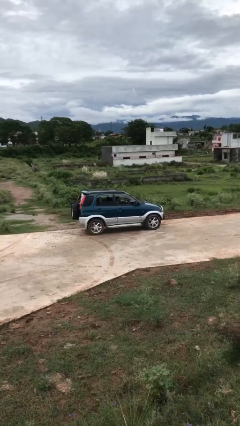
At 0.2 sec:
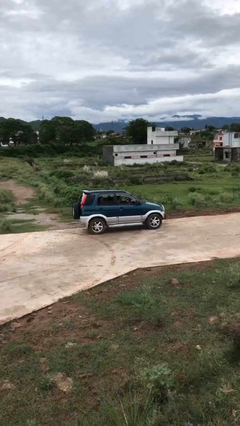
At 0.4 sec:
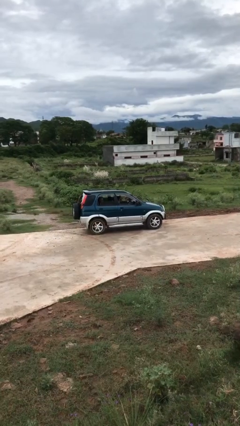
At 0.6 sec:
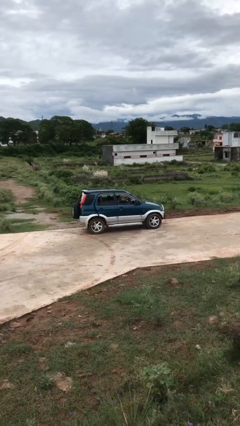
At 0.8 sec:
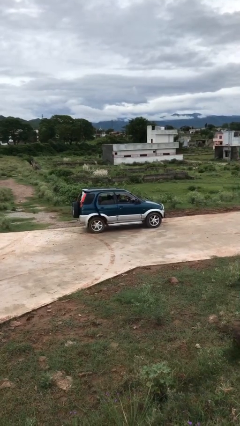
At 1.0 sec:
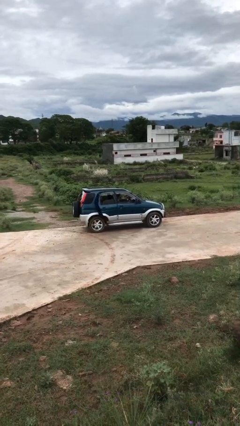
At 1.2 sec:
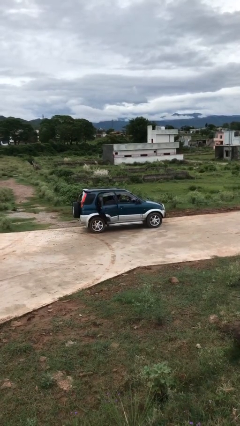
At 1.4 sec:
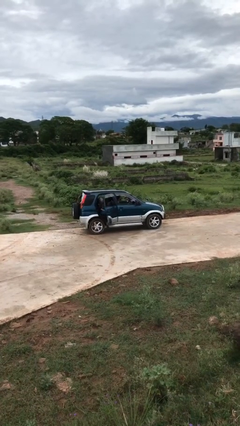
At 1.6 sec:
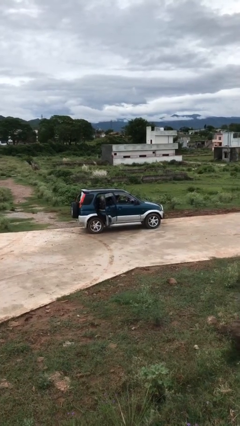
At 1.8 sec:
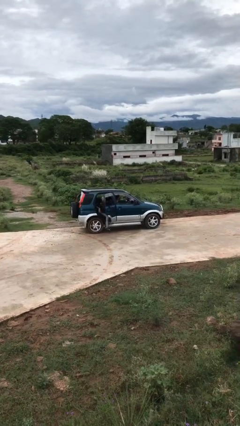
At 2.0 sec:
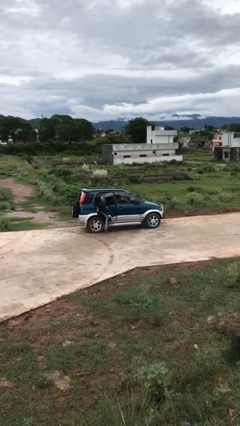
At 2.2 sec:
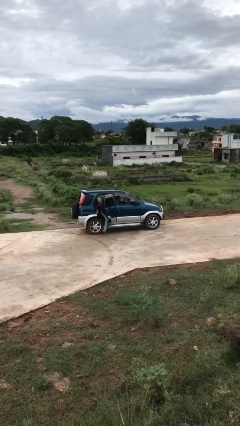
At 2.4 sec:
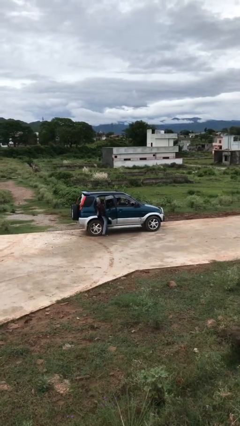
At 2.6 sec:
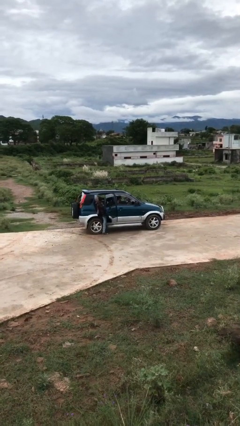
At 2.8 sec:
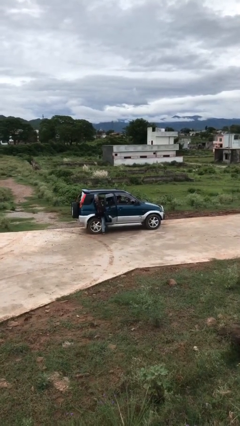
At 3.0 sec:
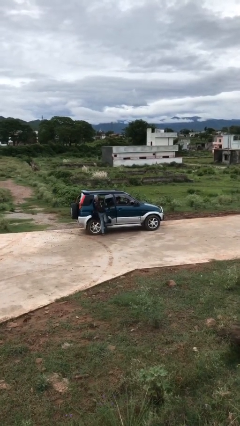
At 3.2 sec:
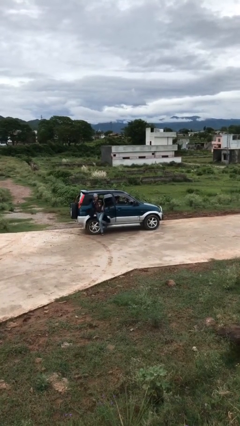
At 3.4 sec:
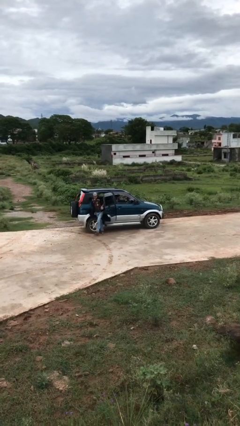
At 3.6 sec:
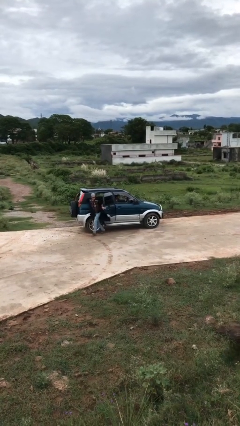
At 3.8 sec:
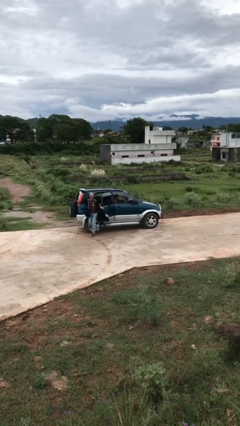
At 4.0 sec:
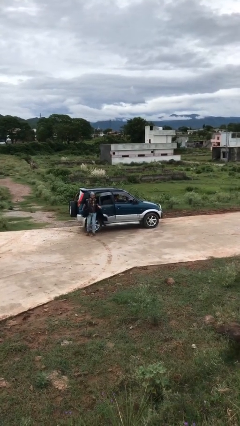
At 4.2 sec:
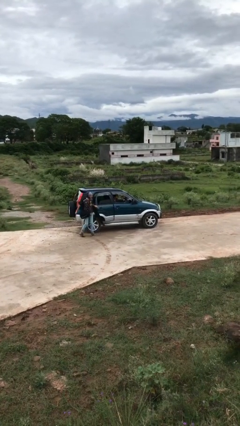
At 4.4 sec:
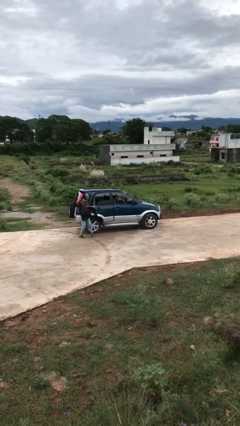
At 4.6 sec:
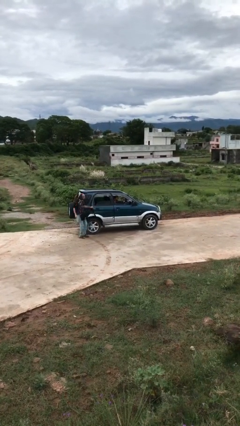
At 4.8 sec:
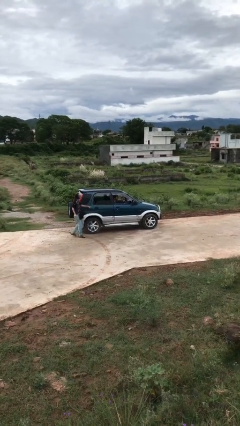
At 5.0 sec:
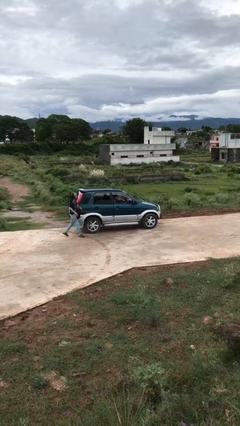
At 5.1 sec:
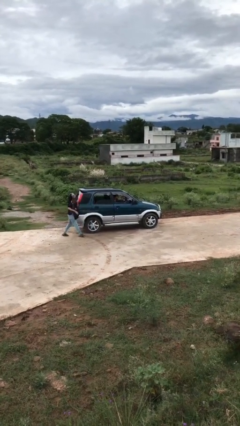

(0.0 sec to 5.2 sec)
car drops off person

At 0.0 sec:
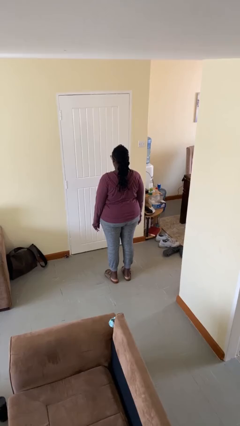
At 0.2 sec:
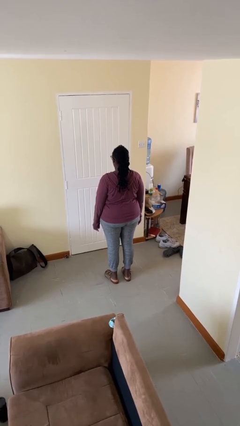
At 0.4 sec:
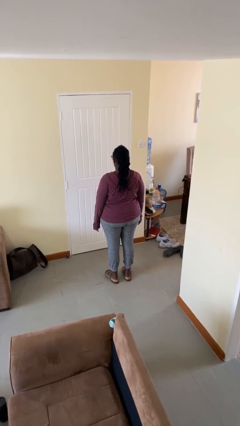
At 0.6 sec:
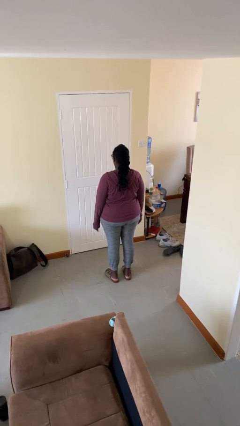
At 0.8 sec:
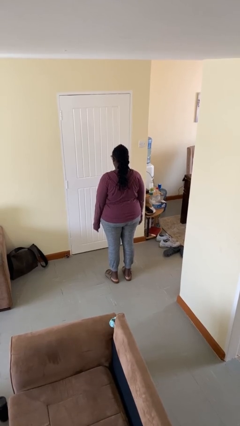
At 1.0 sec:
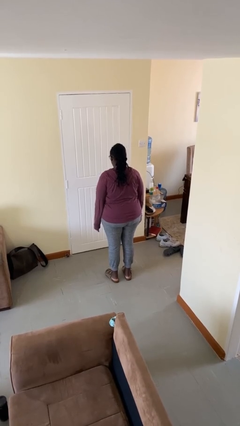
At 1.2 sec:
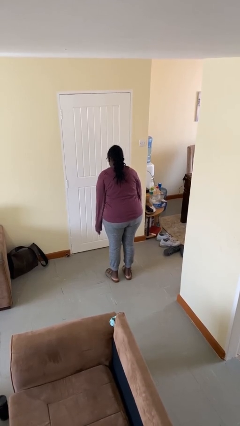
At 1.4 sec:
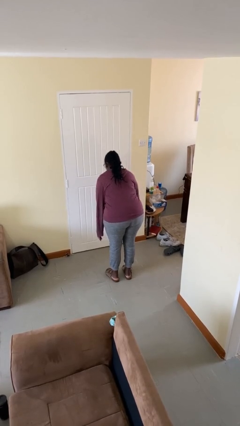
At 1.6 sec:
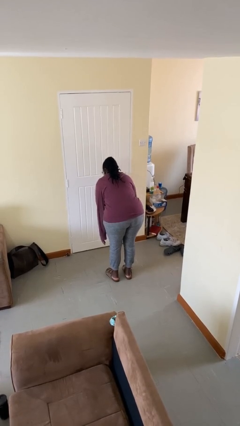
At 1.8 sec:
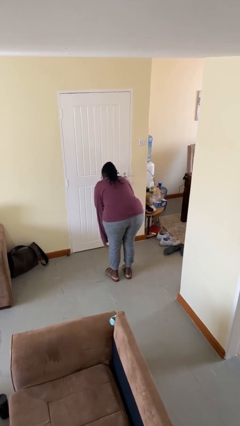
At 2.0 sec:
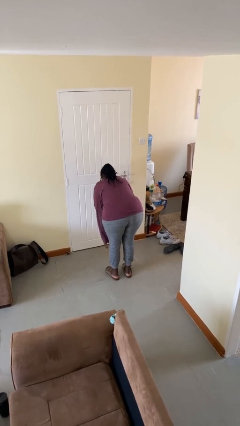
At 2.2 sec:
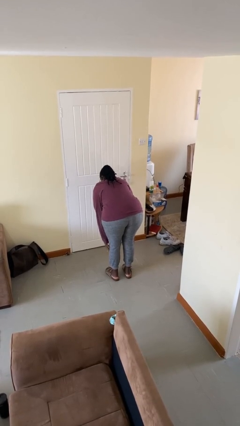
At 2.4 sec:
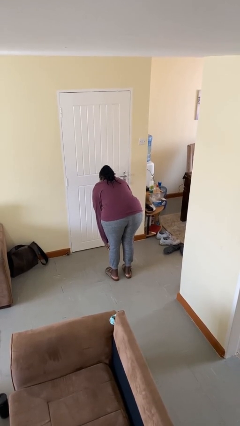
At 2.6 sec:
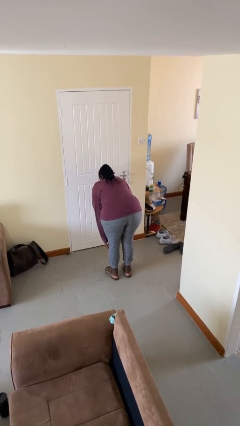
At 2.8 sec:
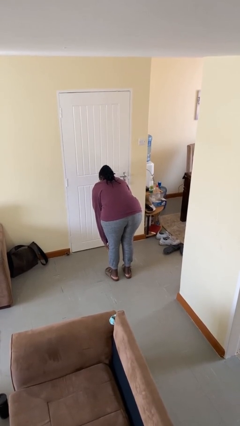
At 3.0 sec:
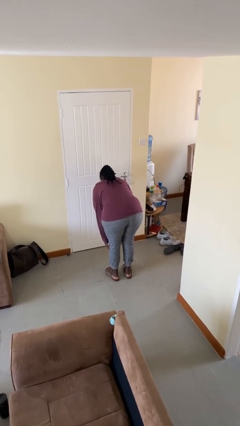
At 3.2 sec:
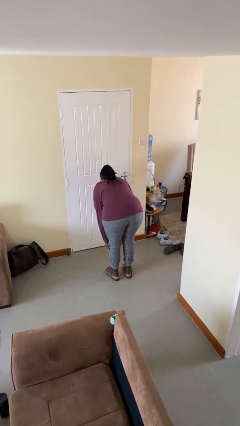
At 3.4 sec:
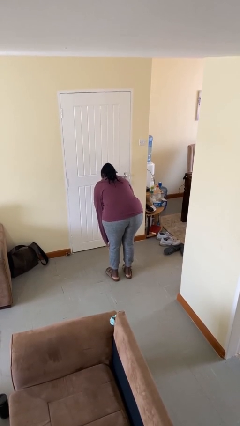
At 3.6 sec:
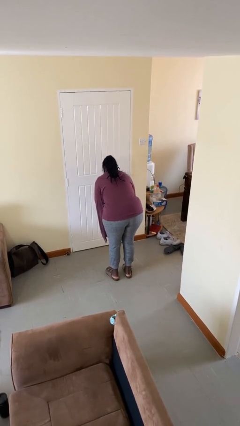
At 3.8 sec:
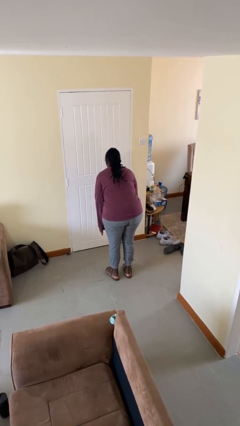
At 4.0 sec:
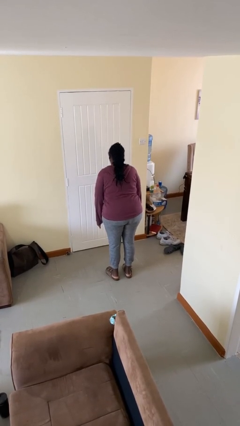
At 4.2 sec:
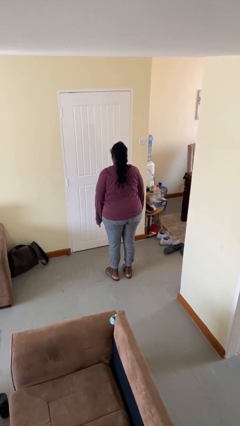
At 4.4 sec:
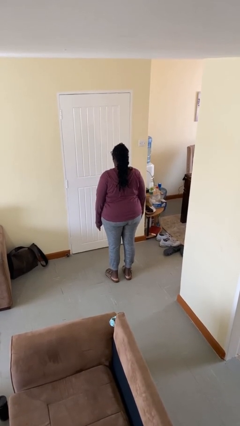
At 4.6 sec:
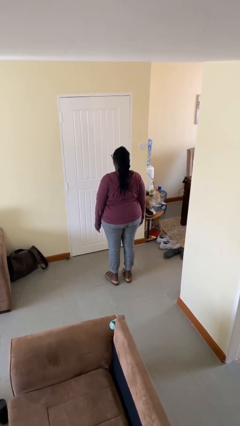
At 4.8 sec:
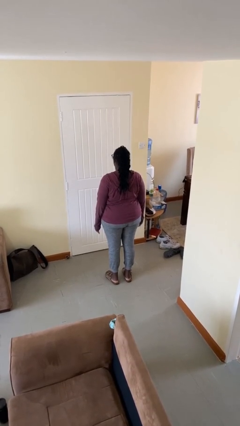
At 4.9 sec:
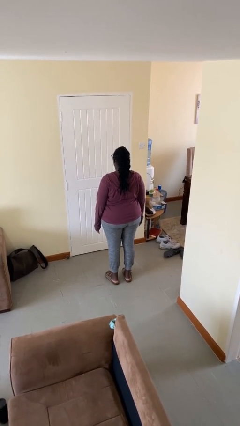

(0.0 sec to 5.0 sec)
person bows

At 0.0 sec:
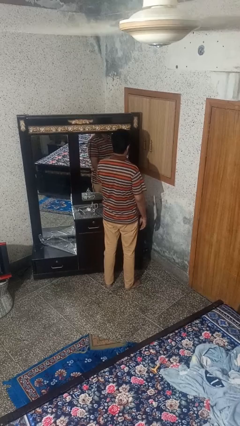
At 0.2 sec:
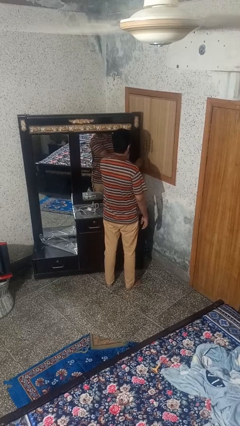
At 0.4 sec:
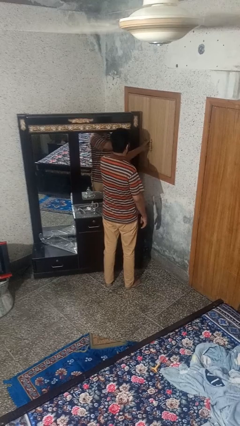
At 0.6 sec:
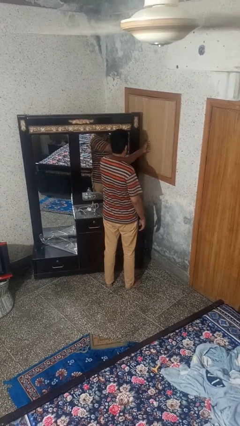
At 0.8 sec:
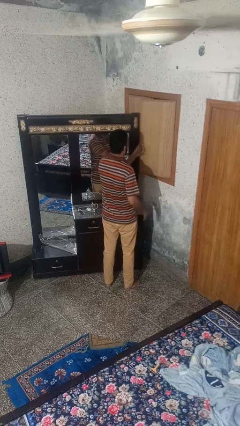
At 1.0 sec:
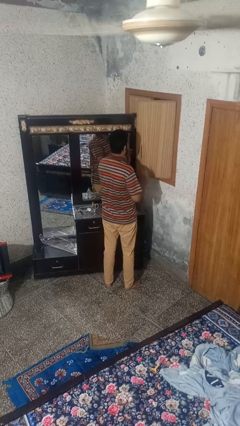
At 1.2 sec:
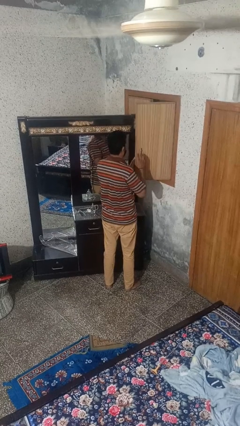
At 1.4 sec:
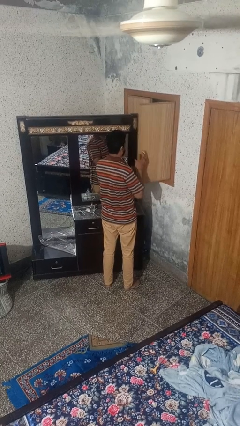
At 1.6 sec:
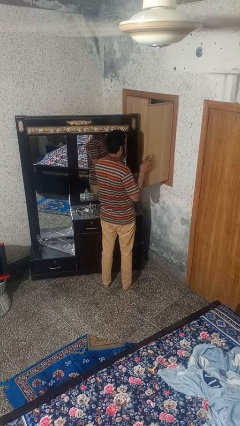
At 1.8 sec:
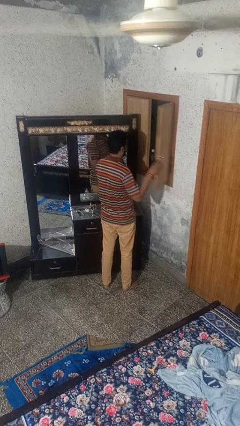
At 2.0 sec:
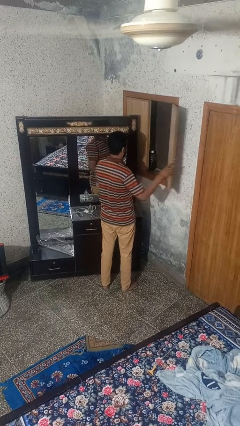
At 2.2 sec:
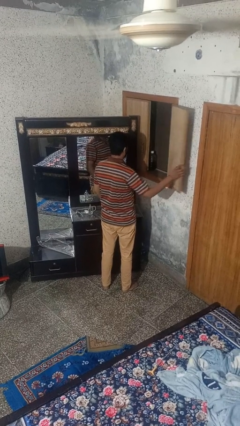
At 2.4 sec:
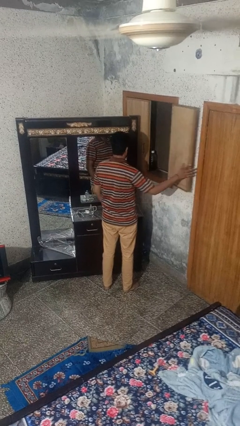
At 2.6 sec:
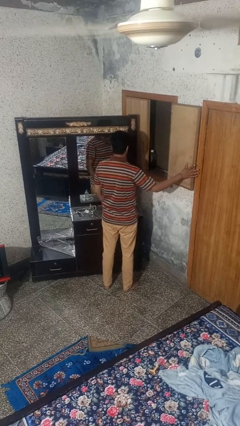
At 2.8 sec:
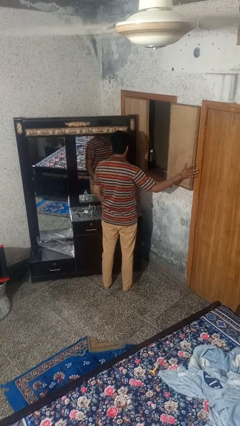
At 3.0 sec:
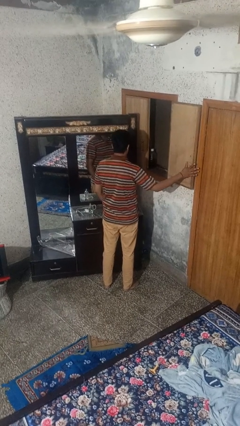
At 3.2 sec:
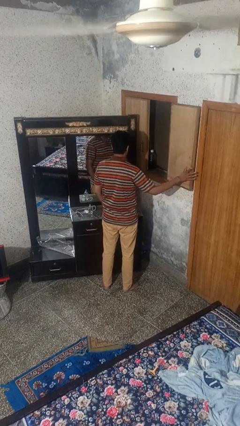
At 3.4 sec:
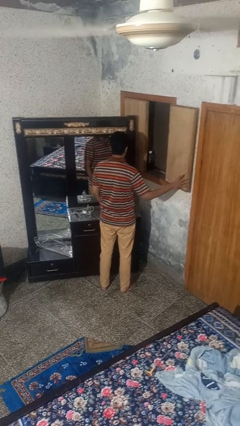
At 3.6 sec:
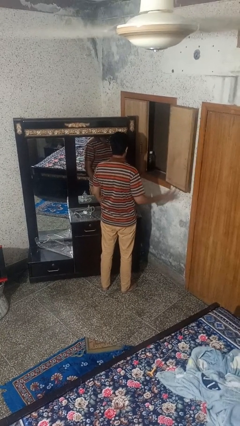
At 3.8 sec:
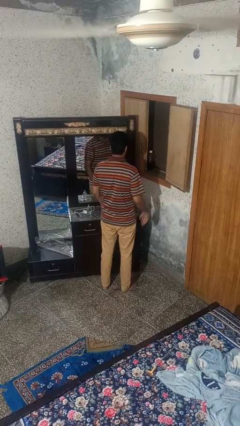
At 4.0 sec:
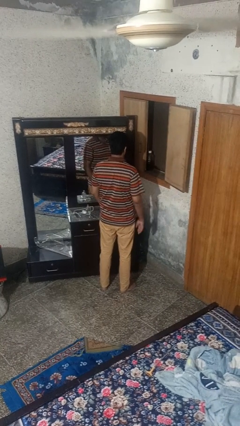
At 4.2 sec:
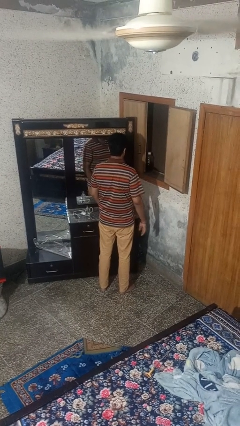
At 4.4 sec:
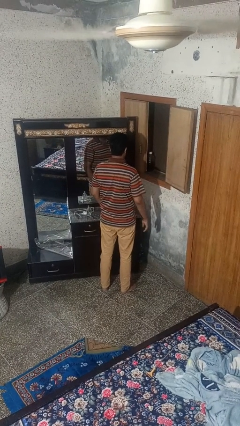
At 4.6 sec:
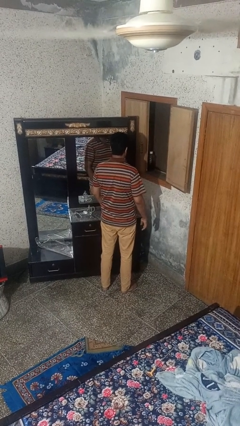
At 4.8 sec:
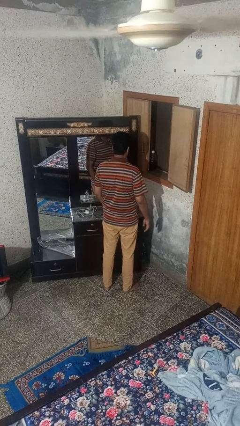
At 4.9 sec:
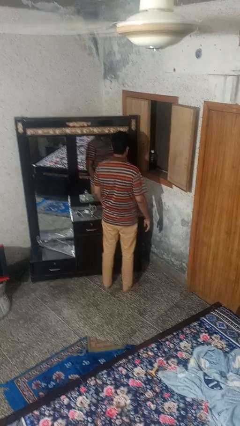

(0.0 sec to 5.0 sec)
person opens home window

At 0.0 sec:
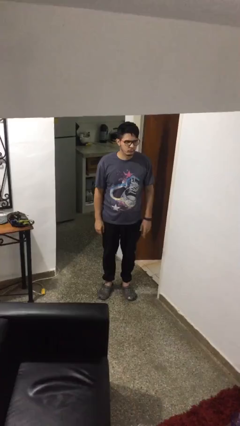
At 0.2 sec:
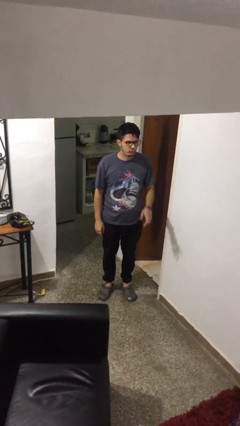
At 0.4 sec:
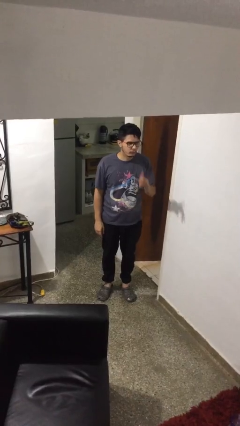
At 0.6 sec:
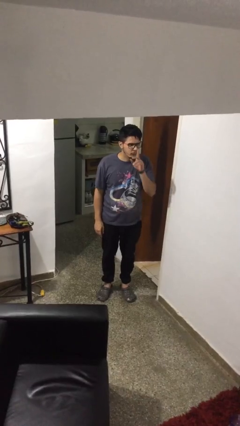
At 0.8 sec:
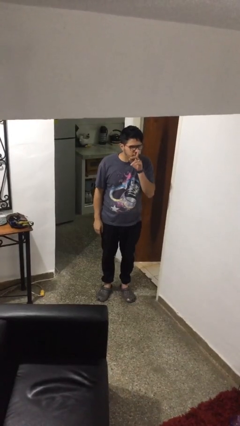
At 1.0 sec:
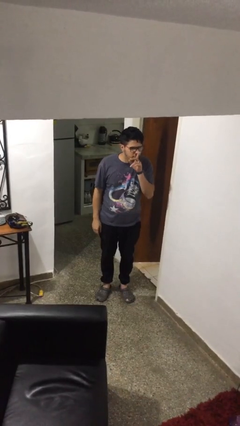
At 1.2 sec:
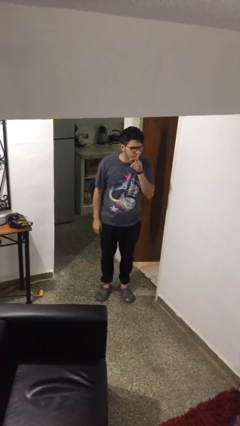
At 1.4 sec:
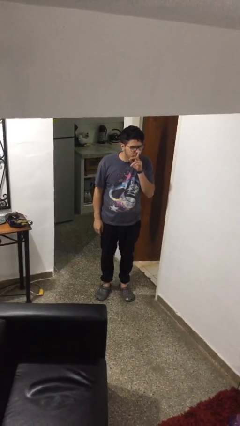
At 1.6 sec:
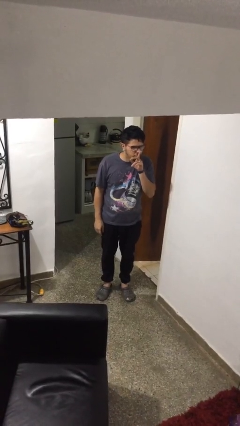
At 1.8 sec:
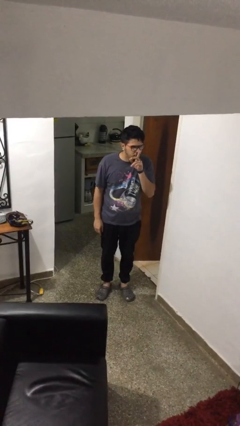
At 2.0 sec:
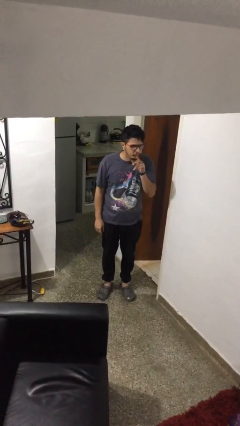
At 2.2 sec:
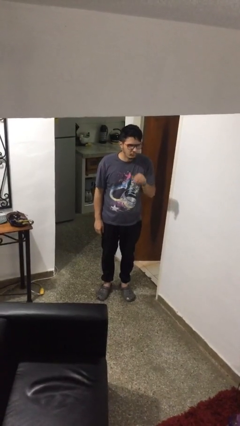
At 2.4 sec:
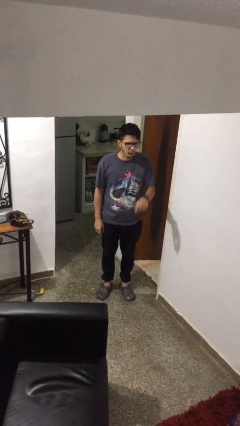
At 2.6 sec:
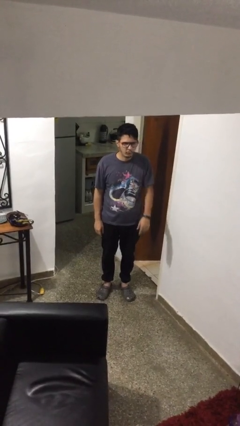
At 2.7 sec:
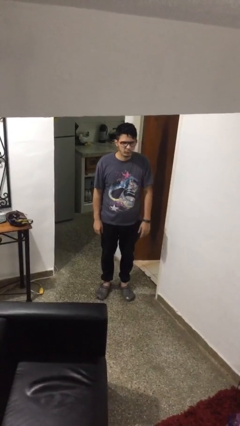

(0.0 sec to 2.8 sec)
person gestures be quiet
